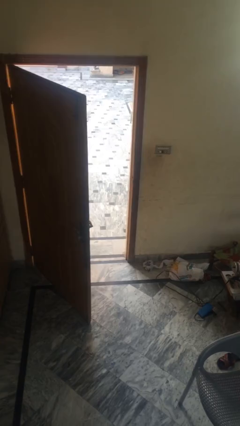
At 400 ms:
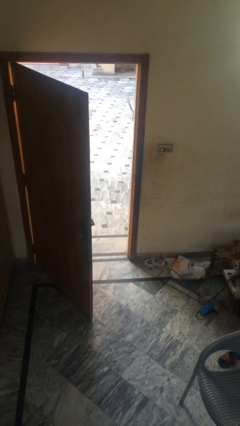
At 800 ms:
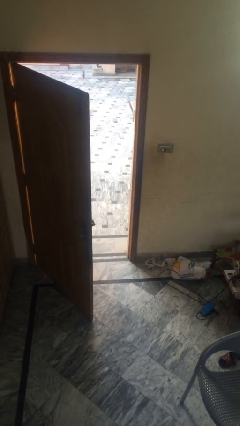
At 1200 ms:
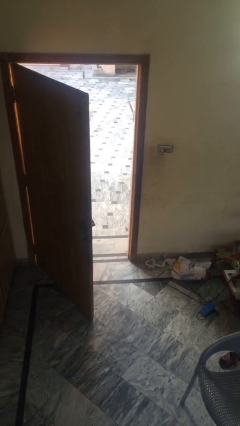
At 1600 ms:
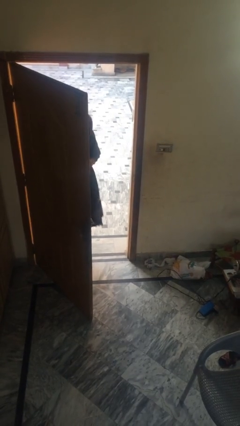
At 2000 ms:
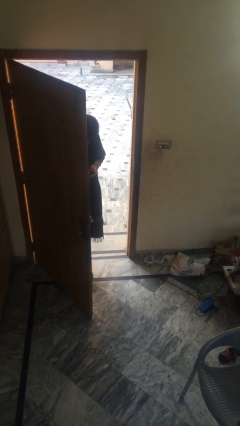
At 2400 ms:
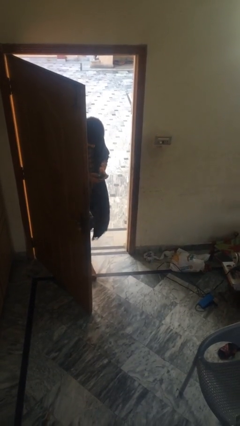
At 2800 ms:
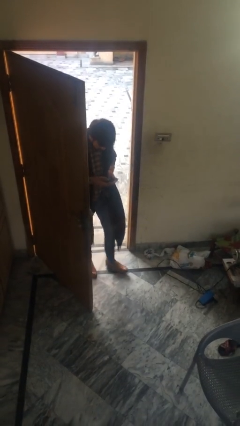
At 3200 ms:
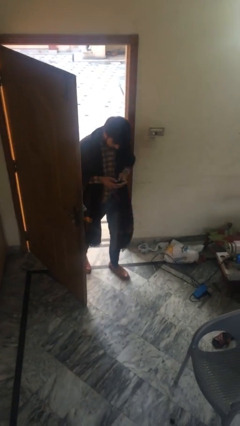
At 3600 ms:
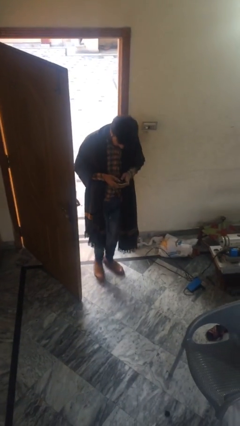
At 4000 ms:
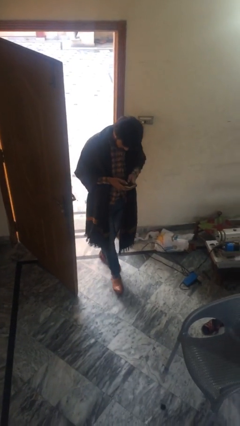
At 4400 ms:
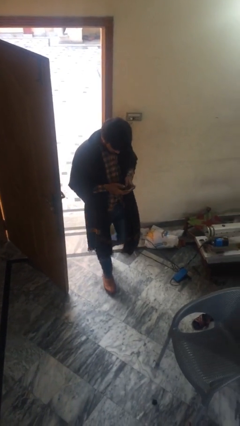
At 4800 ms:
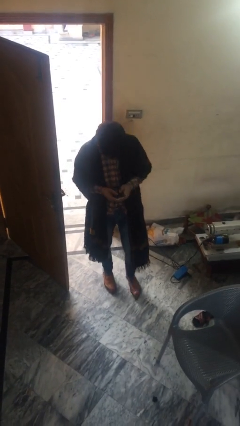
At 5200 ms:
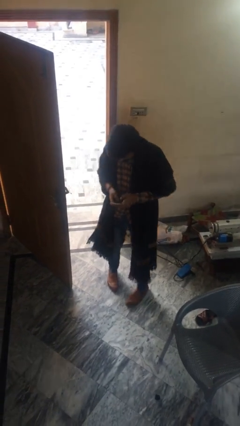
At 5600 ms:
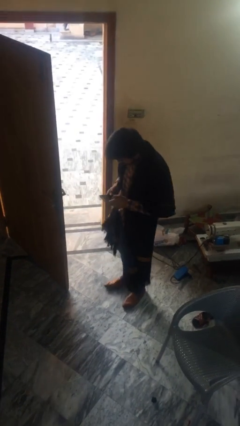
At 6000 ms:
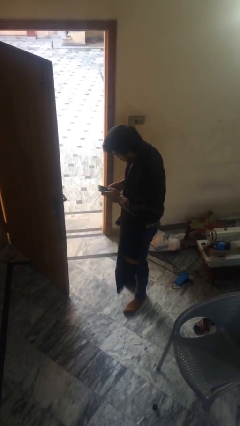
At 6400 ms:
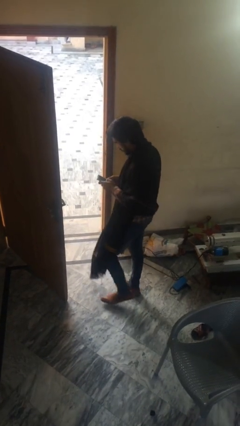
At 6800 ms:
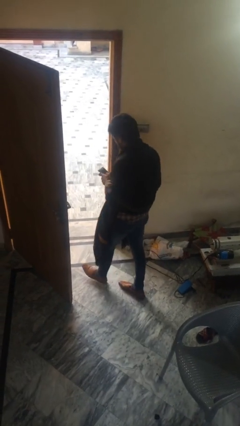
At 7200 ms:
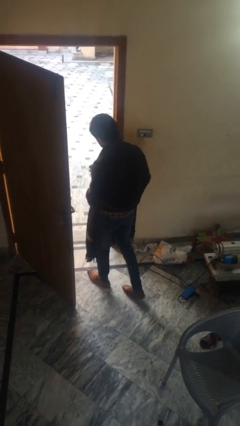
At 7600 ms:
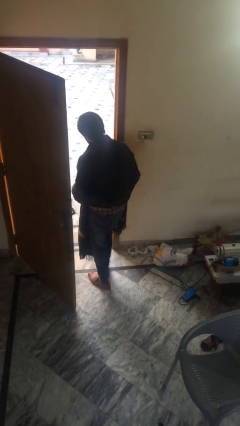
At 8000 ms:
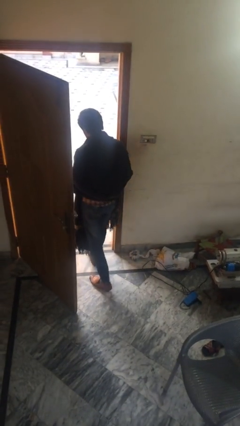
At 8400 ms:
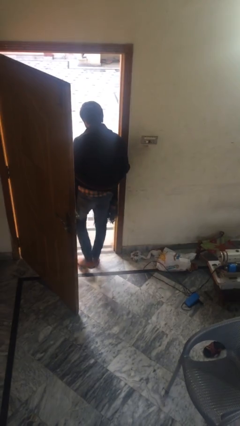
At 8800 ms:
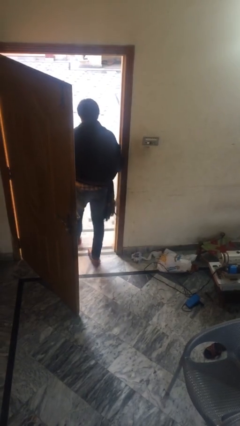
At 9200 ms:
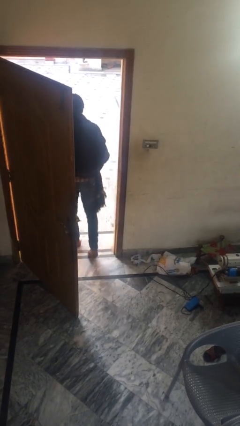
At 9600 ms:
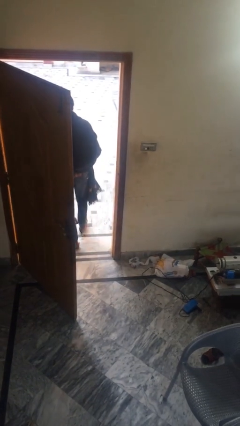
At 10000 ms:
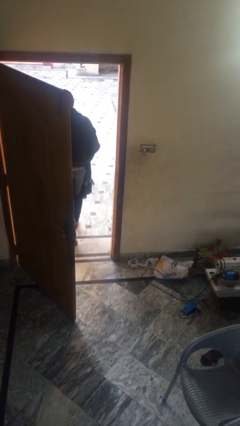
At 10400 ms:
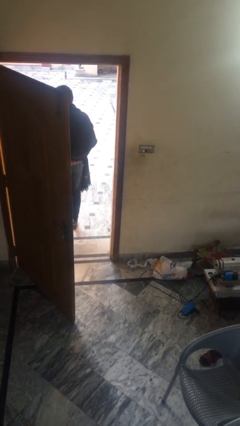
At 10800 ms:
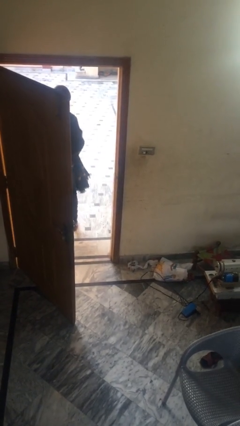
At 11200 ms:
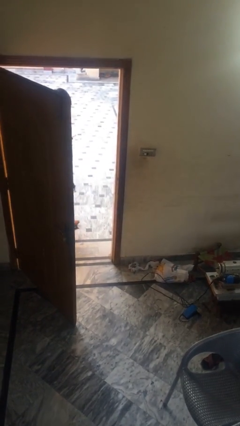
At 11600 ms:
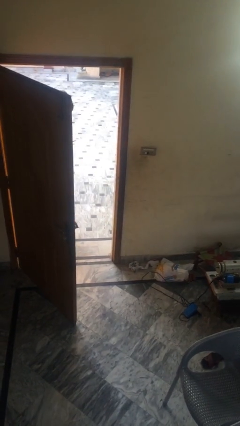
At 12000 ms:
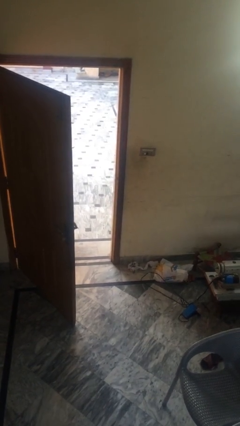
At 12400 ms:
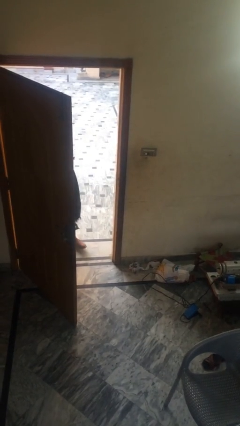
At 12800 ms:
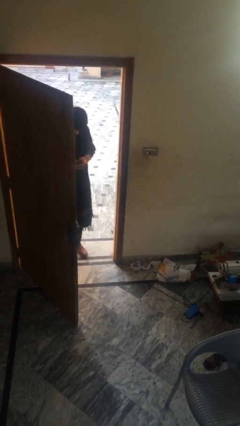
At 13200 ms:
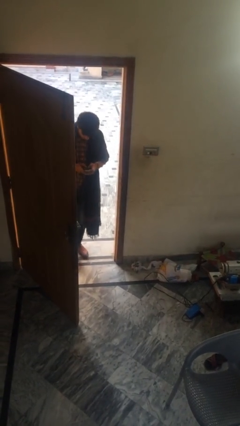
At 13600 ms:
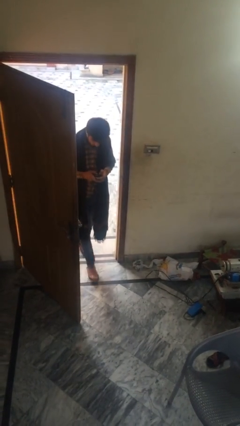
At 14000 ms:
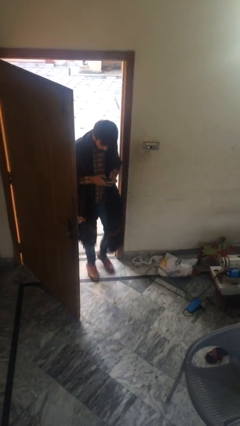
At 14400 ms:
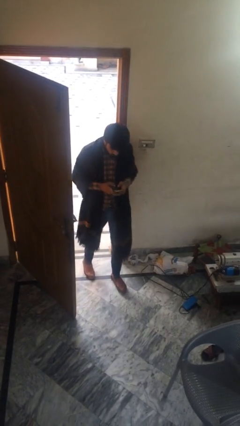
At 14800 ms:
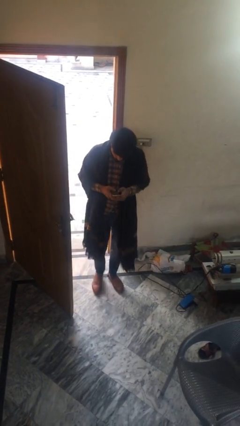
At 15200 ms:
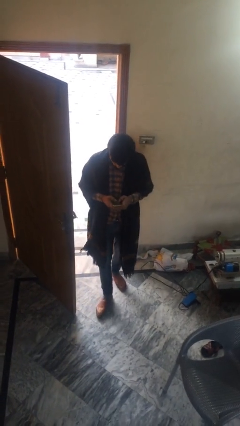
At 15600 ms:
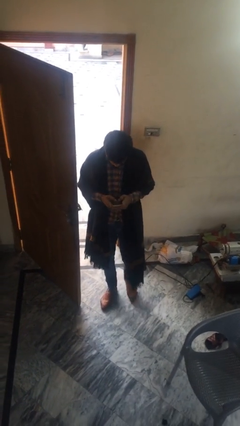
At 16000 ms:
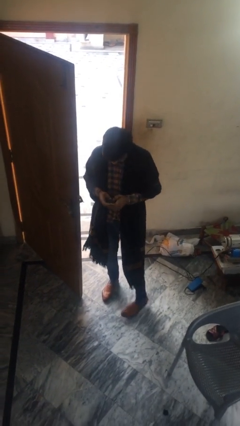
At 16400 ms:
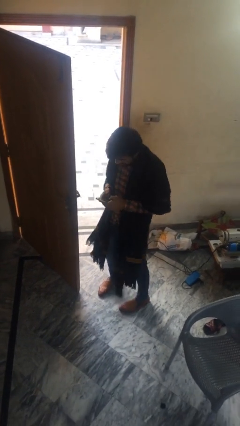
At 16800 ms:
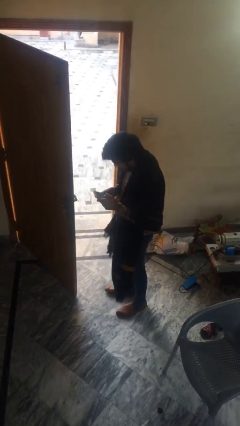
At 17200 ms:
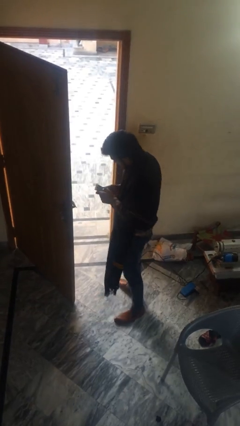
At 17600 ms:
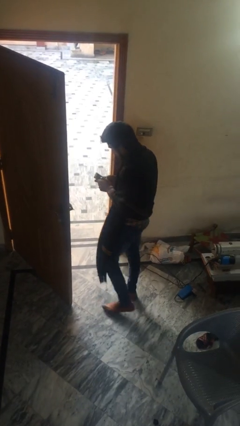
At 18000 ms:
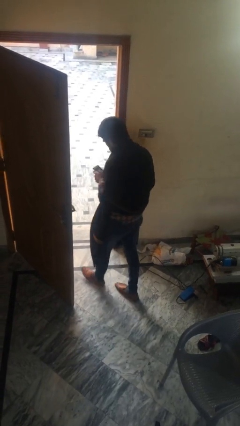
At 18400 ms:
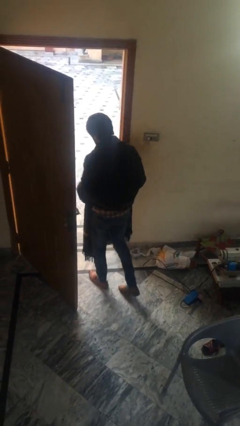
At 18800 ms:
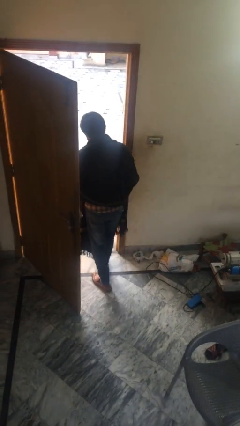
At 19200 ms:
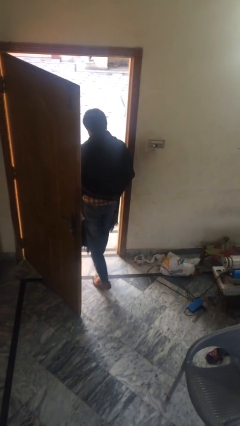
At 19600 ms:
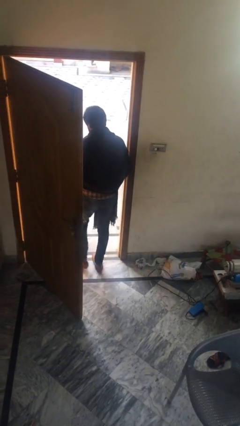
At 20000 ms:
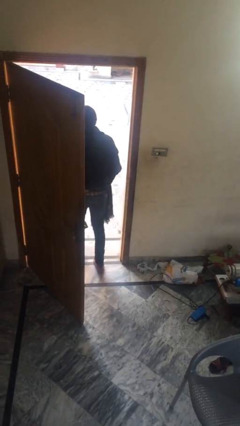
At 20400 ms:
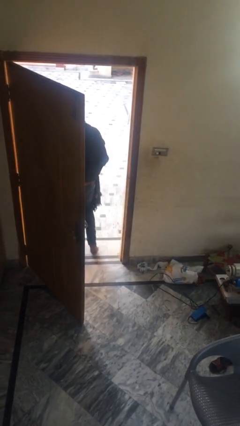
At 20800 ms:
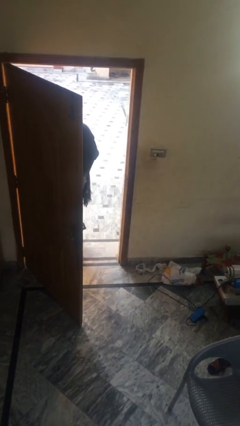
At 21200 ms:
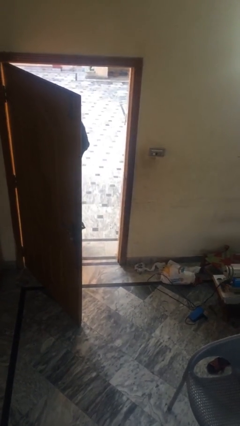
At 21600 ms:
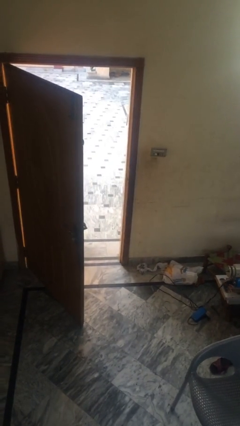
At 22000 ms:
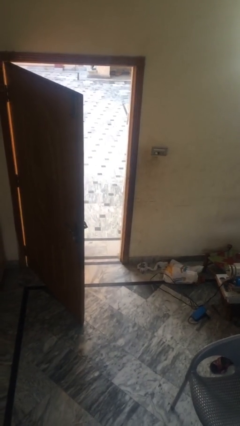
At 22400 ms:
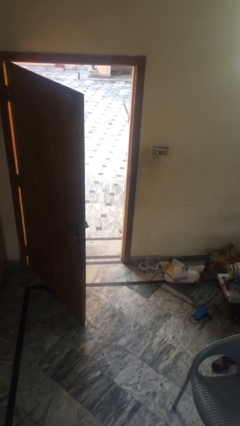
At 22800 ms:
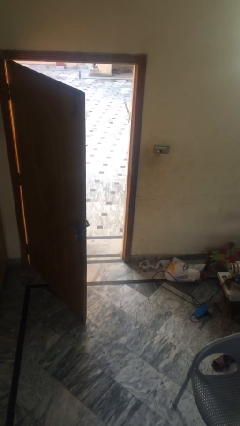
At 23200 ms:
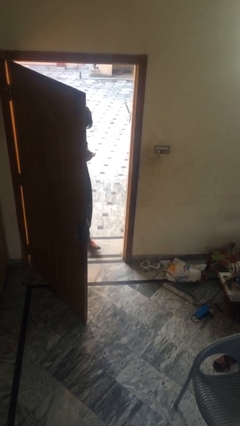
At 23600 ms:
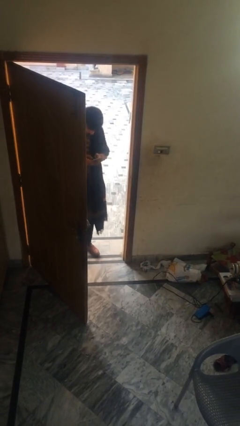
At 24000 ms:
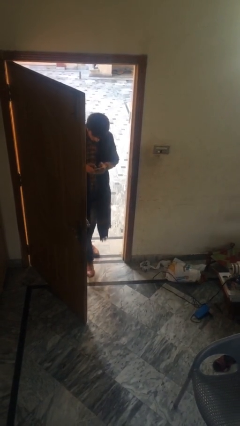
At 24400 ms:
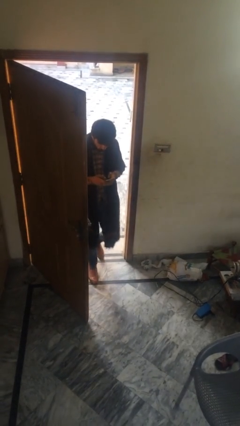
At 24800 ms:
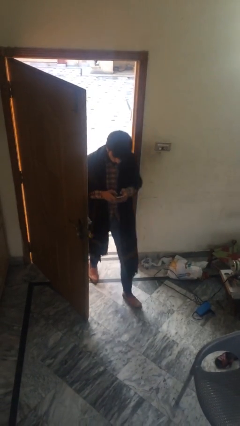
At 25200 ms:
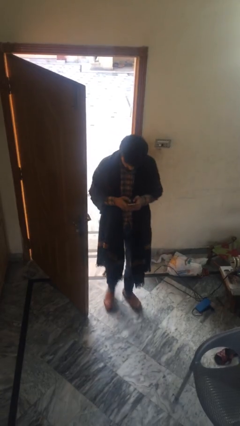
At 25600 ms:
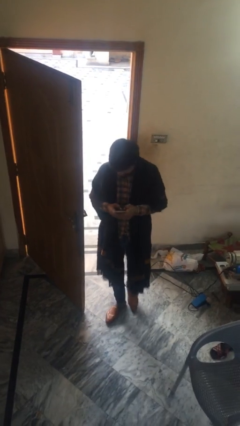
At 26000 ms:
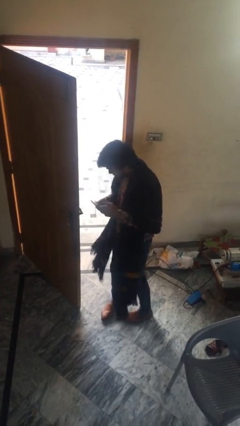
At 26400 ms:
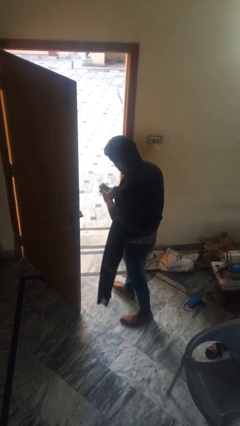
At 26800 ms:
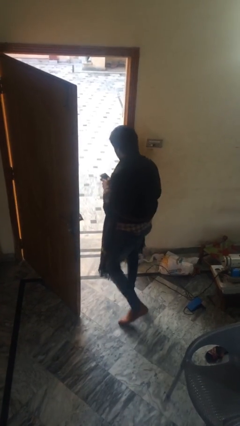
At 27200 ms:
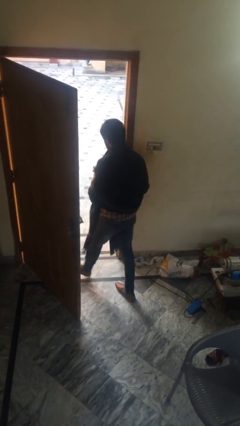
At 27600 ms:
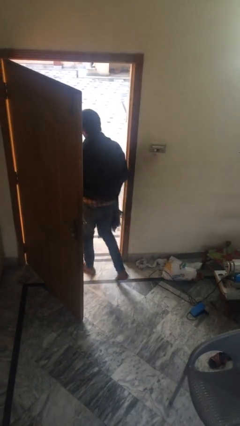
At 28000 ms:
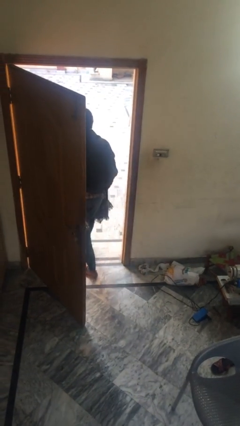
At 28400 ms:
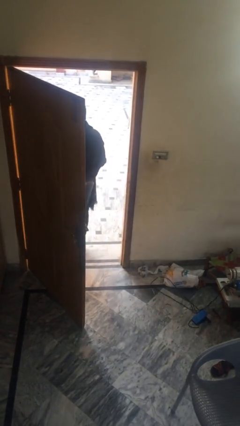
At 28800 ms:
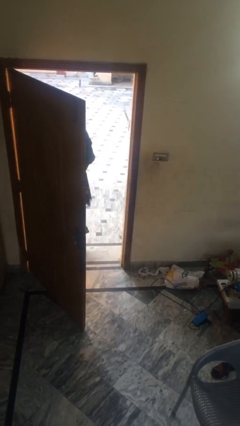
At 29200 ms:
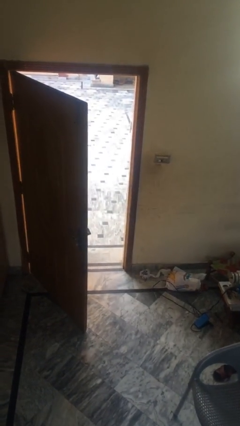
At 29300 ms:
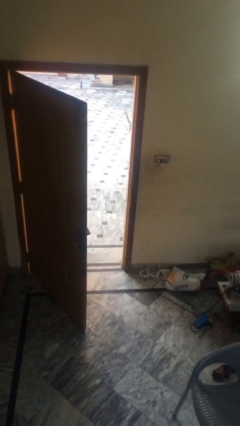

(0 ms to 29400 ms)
person texts on phone

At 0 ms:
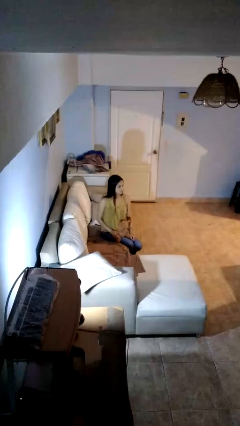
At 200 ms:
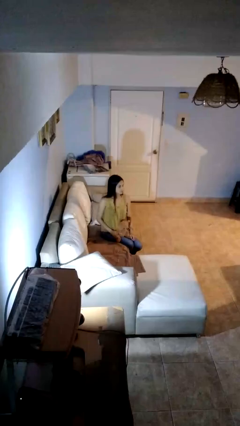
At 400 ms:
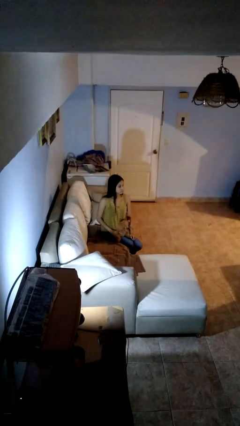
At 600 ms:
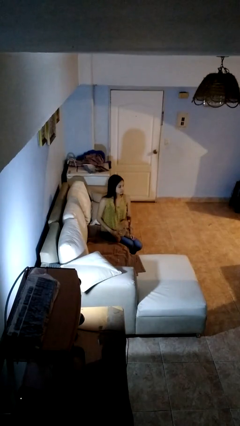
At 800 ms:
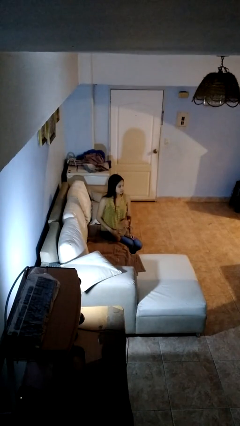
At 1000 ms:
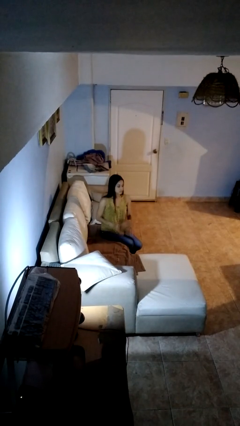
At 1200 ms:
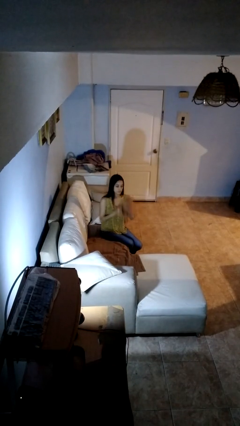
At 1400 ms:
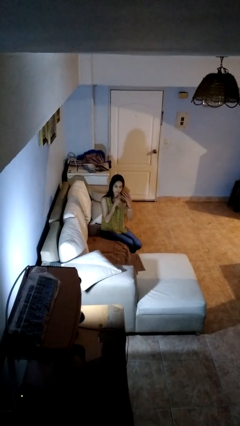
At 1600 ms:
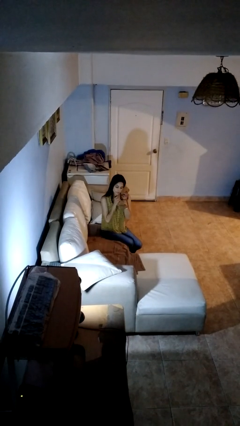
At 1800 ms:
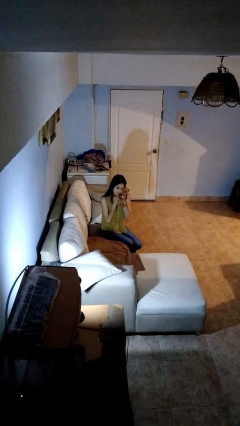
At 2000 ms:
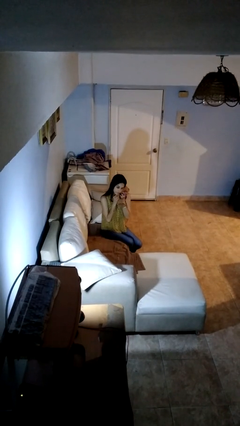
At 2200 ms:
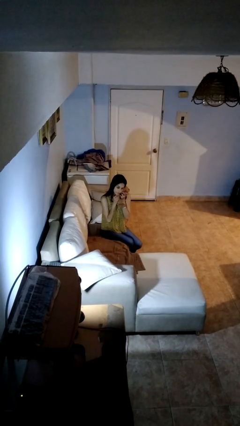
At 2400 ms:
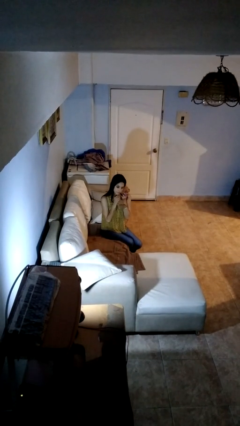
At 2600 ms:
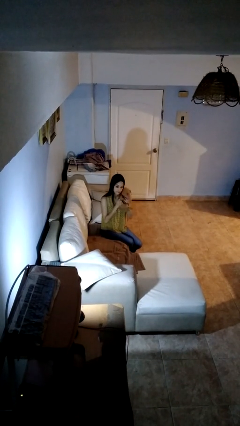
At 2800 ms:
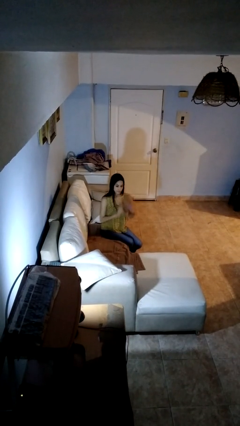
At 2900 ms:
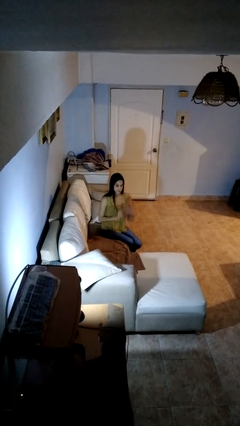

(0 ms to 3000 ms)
person hugs stuffed animal

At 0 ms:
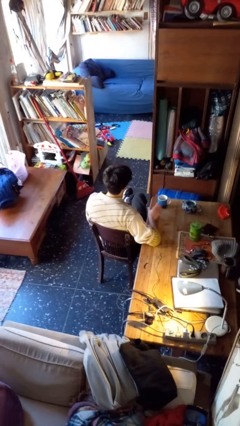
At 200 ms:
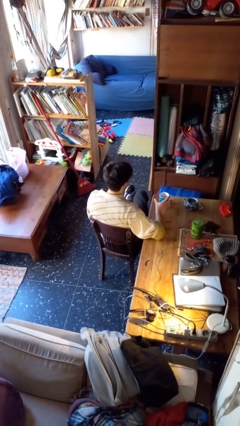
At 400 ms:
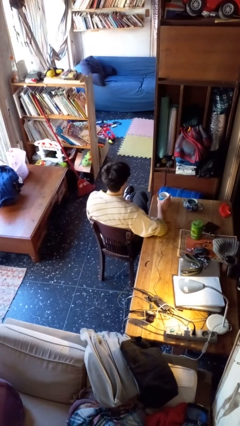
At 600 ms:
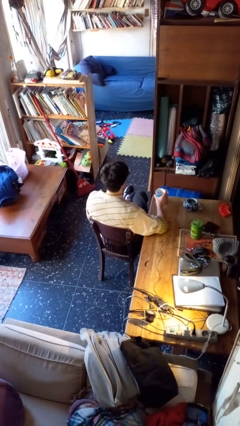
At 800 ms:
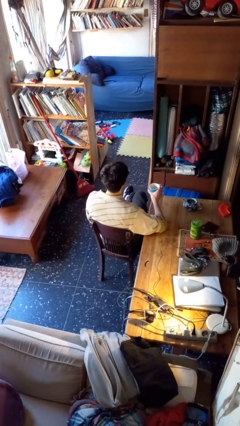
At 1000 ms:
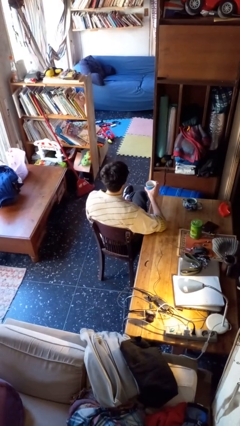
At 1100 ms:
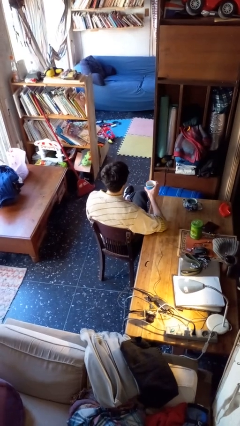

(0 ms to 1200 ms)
person picks up object from table
